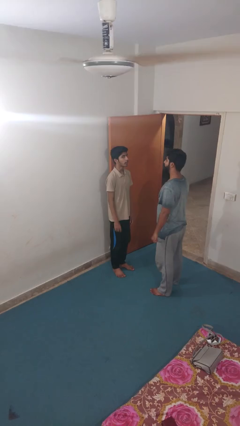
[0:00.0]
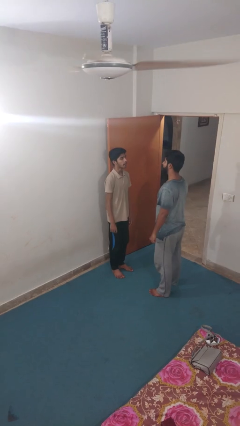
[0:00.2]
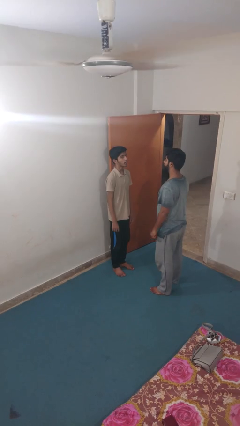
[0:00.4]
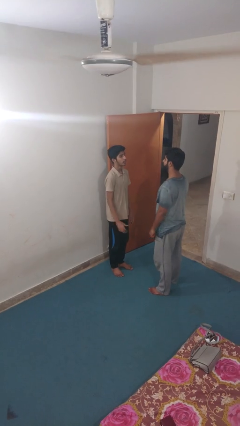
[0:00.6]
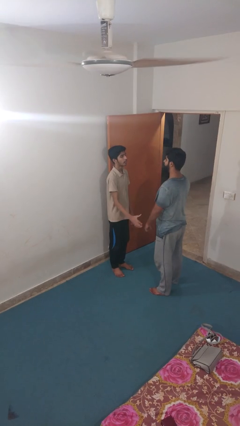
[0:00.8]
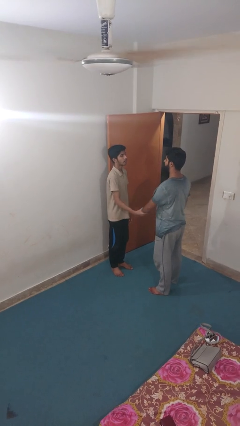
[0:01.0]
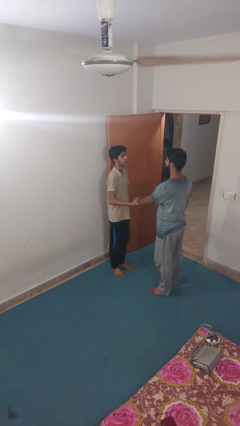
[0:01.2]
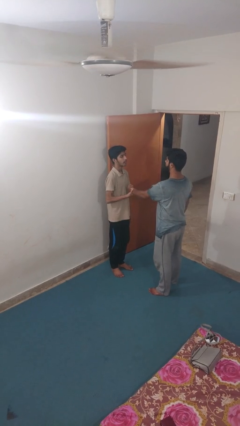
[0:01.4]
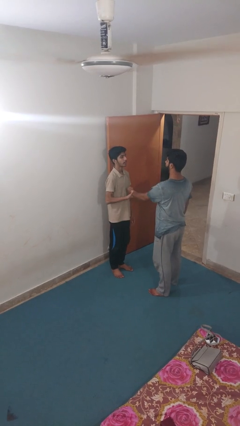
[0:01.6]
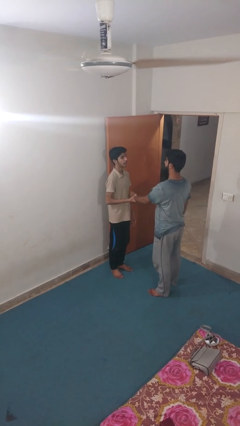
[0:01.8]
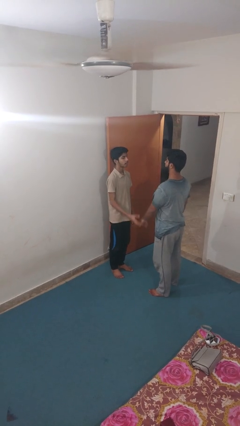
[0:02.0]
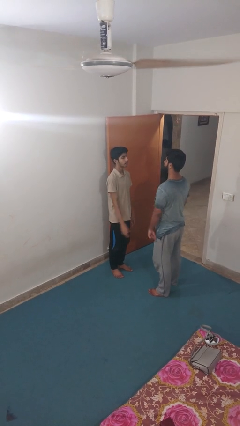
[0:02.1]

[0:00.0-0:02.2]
person grabs person by forearm

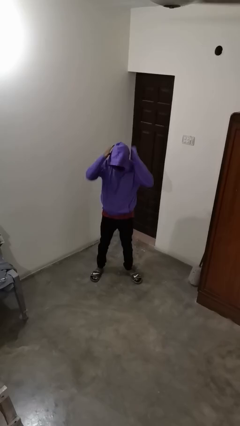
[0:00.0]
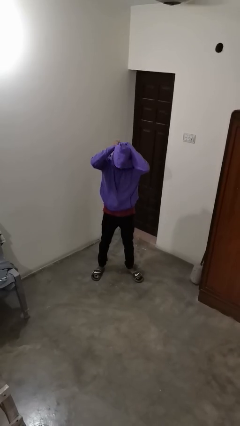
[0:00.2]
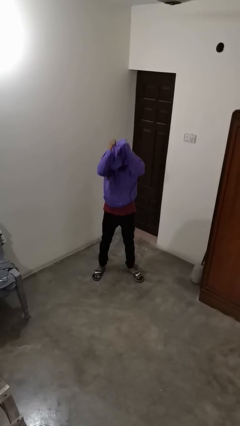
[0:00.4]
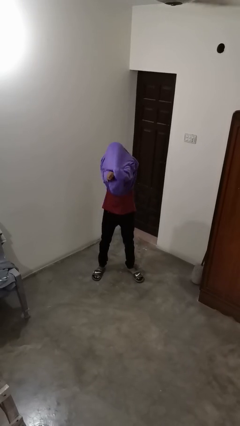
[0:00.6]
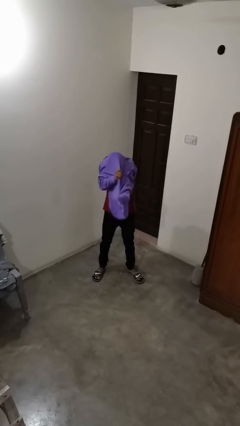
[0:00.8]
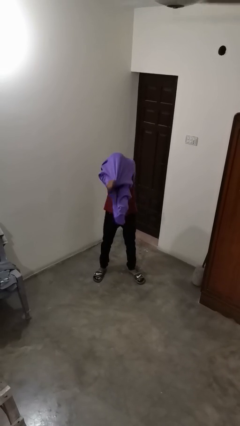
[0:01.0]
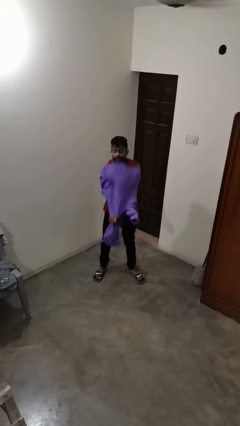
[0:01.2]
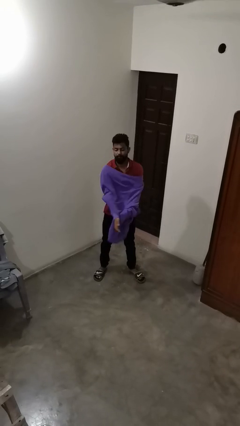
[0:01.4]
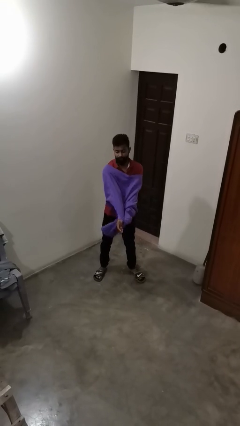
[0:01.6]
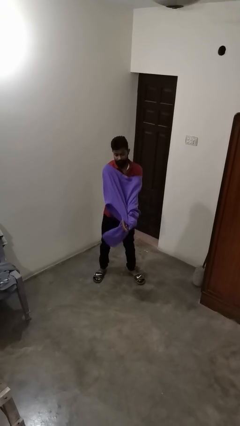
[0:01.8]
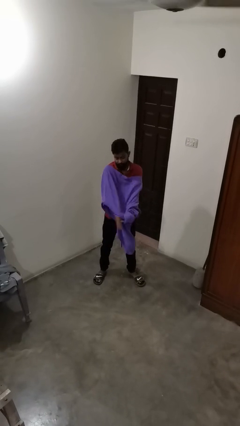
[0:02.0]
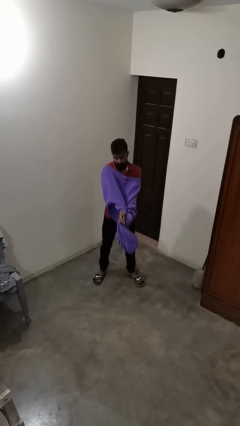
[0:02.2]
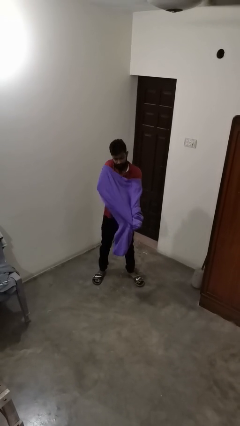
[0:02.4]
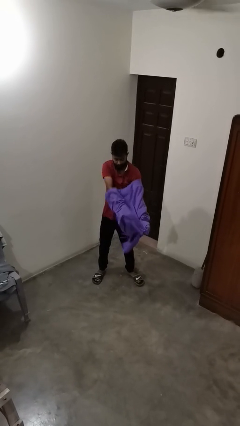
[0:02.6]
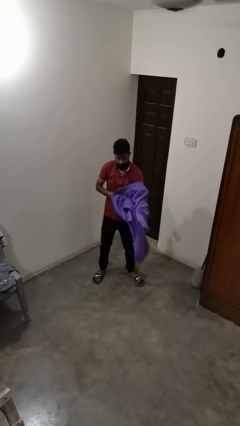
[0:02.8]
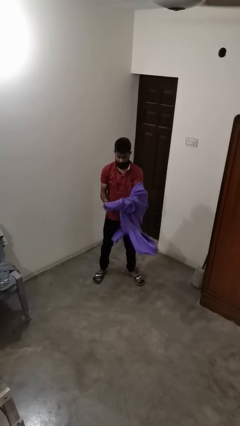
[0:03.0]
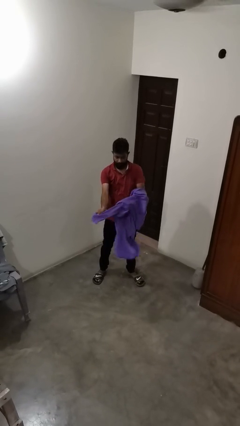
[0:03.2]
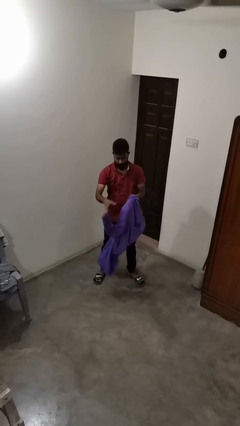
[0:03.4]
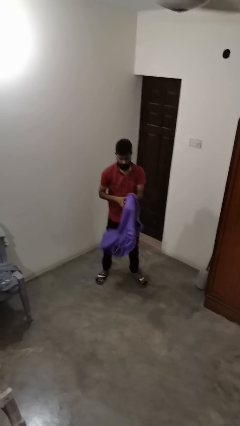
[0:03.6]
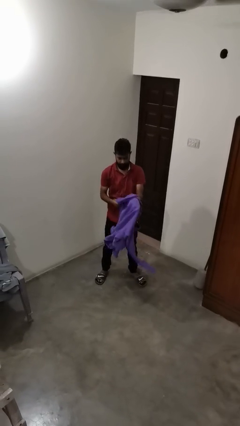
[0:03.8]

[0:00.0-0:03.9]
person takes off hoodie

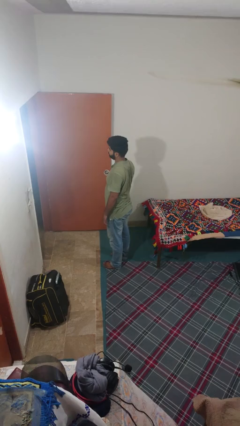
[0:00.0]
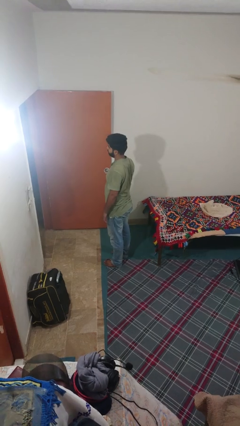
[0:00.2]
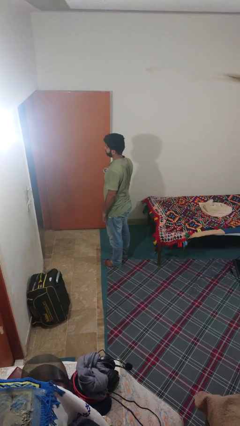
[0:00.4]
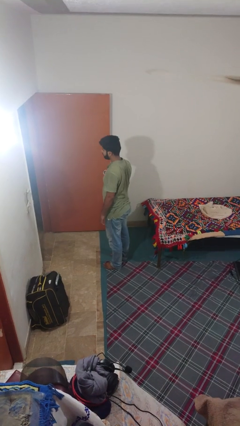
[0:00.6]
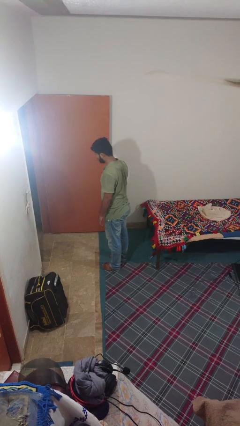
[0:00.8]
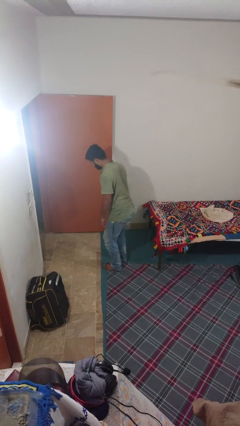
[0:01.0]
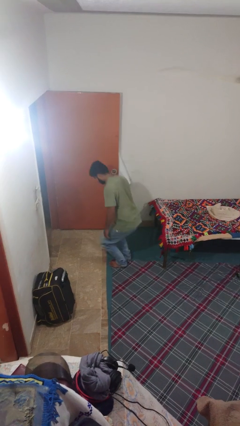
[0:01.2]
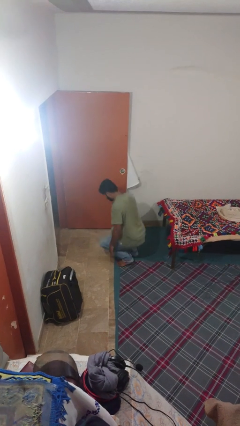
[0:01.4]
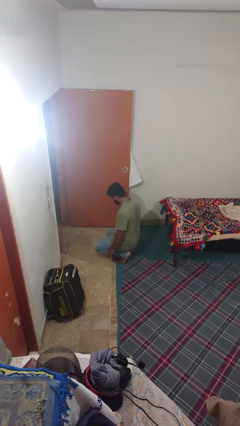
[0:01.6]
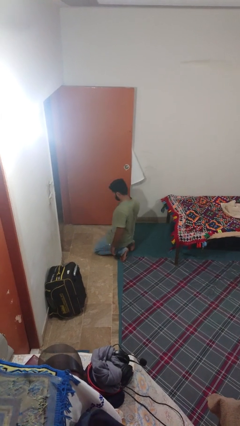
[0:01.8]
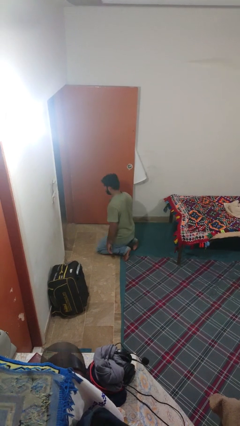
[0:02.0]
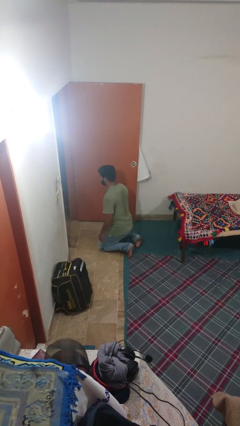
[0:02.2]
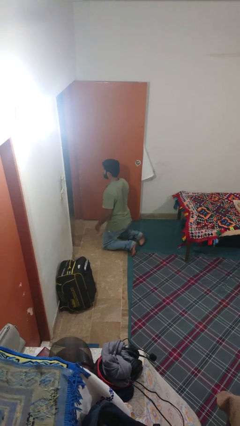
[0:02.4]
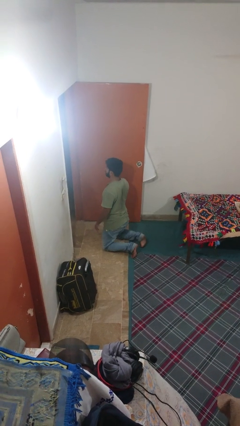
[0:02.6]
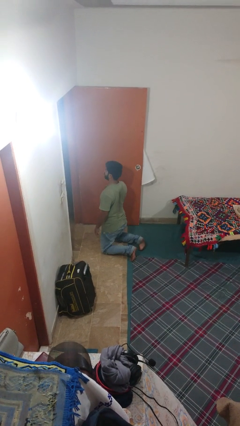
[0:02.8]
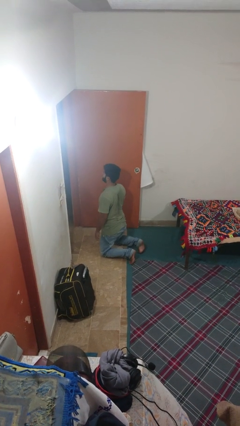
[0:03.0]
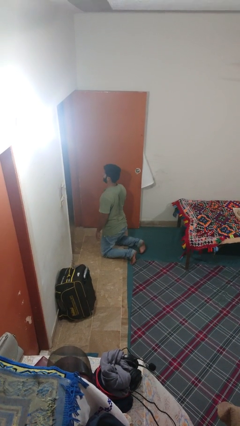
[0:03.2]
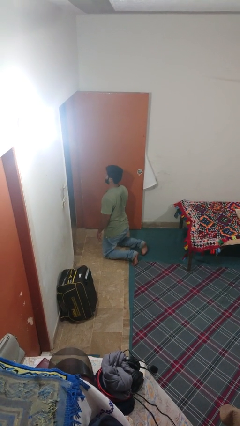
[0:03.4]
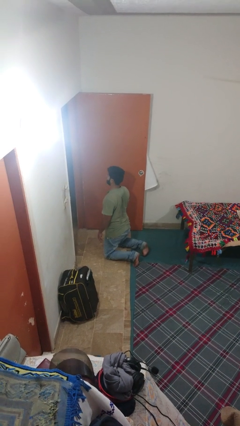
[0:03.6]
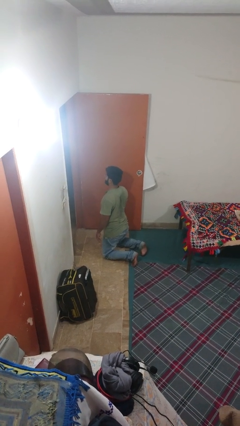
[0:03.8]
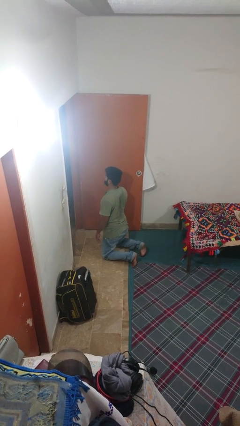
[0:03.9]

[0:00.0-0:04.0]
person kneels

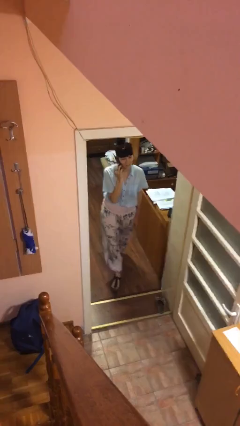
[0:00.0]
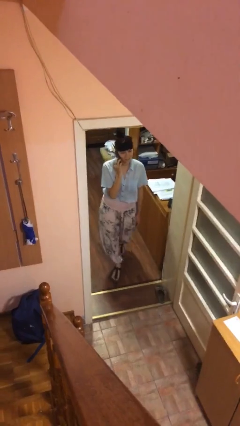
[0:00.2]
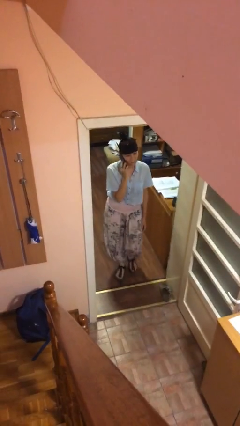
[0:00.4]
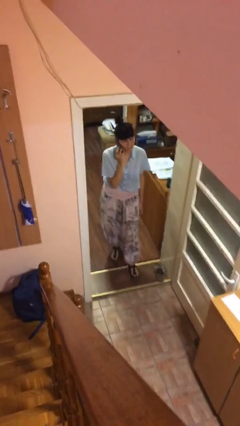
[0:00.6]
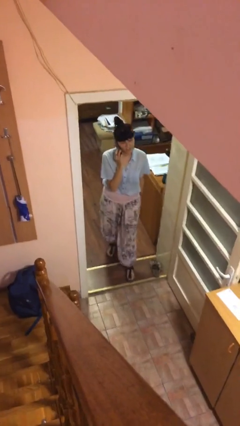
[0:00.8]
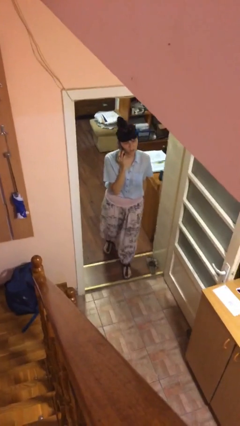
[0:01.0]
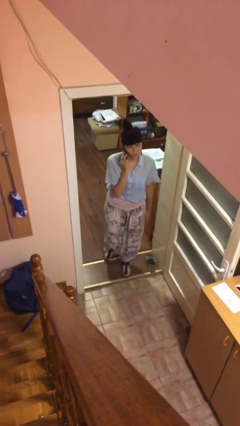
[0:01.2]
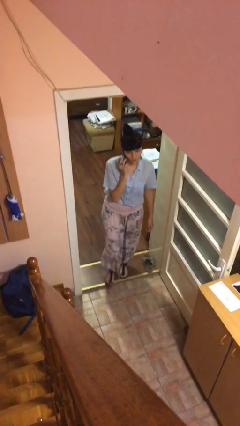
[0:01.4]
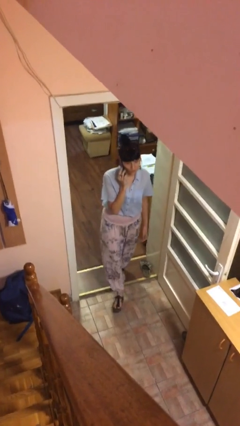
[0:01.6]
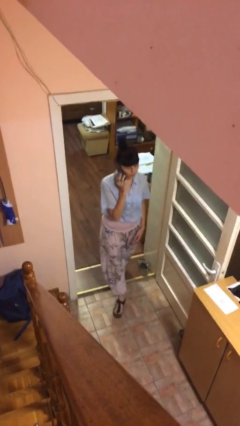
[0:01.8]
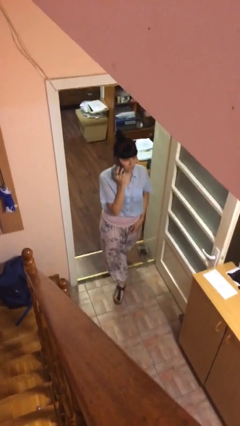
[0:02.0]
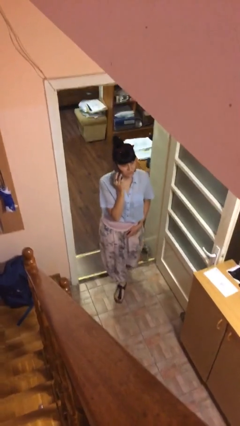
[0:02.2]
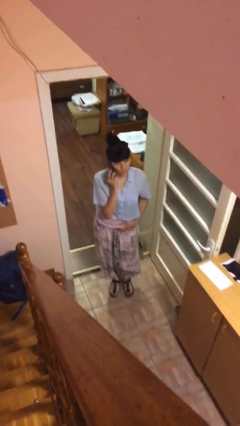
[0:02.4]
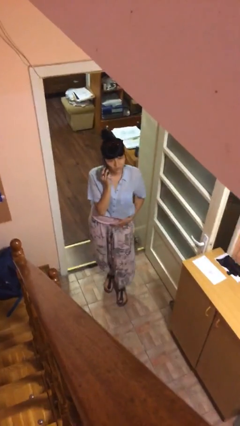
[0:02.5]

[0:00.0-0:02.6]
person enters scene through structure

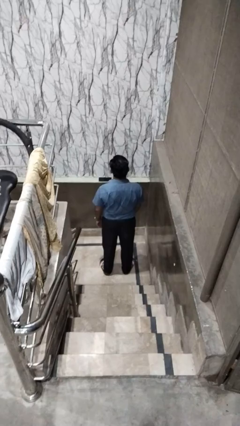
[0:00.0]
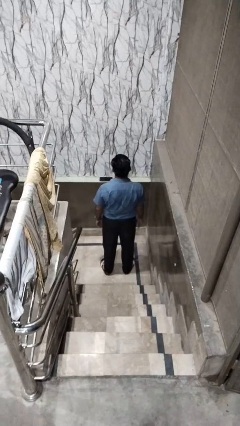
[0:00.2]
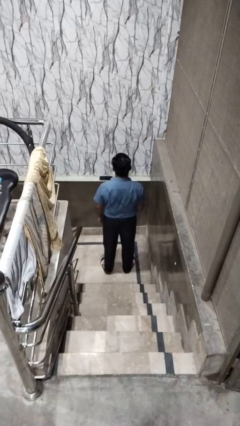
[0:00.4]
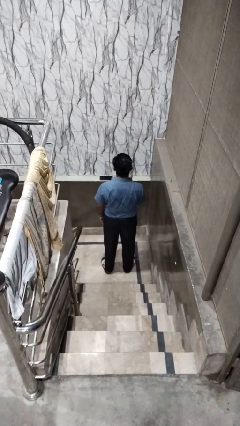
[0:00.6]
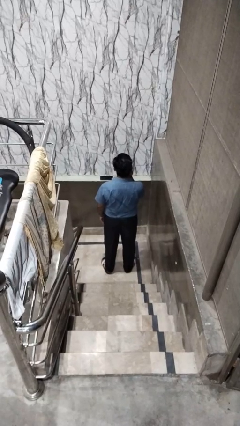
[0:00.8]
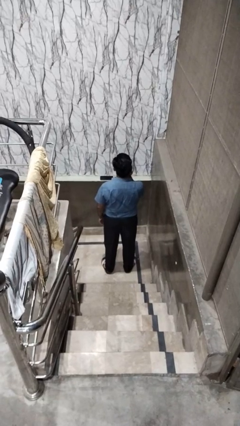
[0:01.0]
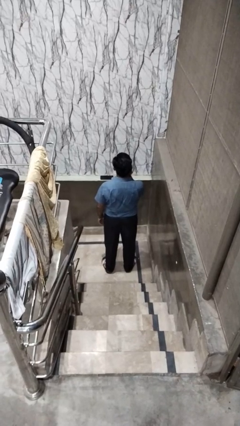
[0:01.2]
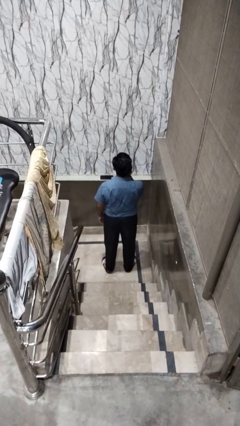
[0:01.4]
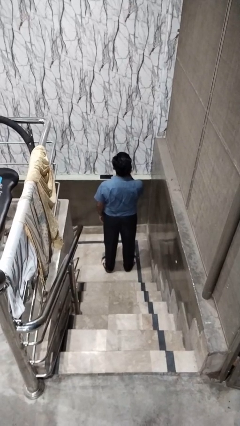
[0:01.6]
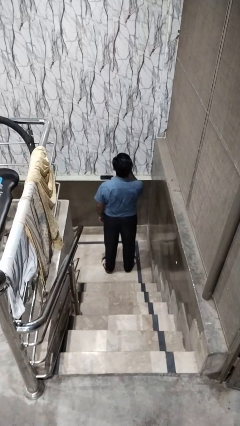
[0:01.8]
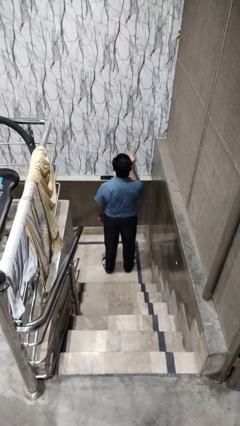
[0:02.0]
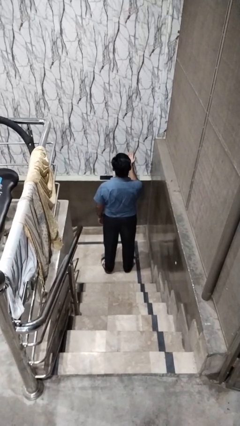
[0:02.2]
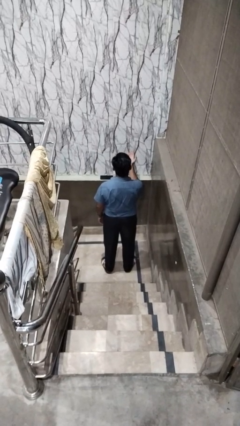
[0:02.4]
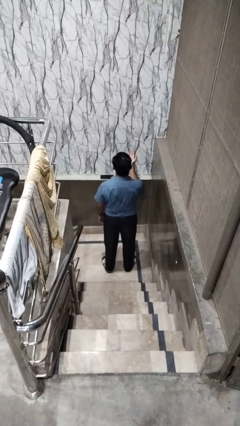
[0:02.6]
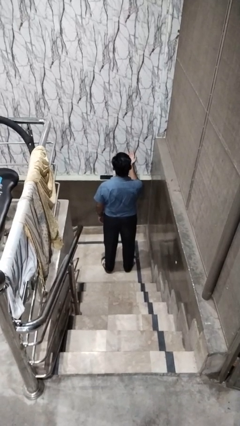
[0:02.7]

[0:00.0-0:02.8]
person gestures blow kiss

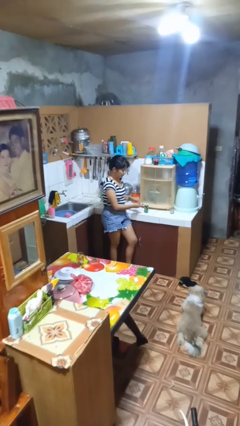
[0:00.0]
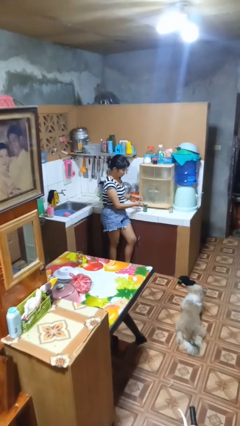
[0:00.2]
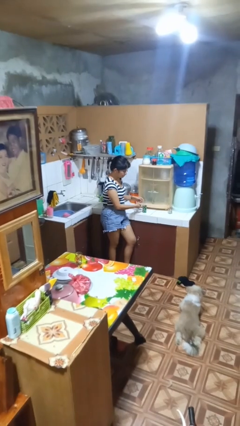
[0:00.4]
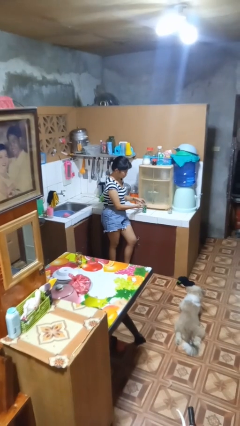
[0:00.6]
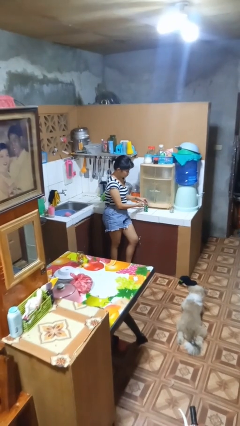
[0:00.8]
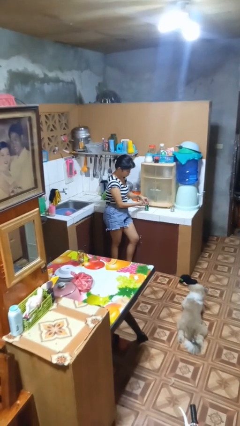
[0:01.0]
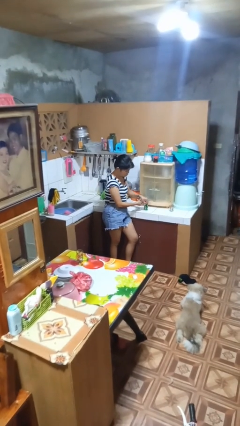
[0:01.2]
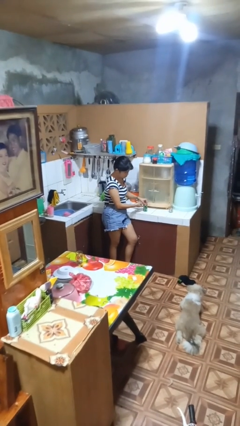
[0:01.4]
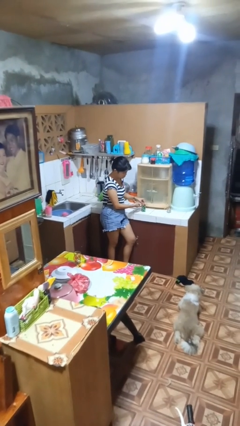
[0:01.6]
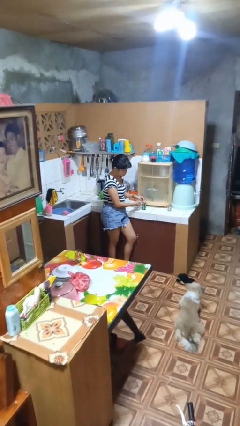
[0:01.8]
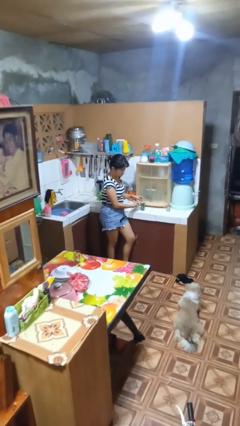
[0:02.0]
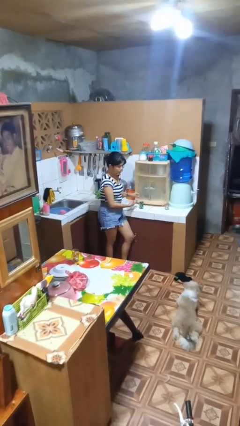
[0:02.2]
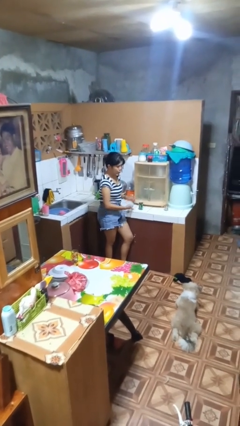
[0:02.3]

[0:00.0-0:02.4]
person opens can with can opener
